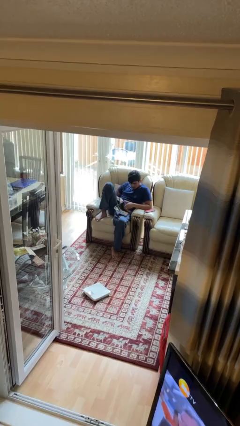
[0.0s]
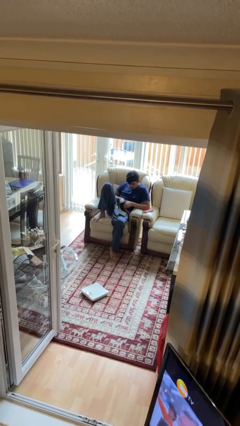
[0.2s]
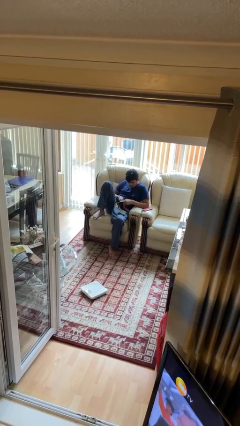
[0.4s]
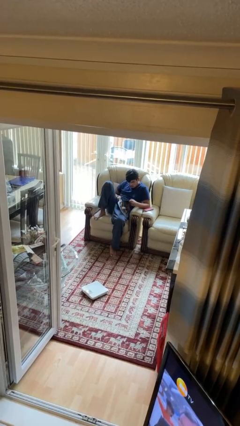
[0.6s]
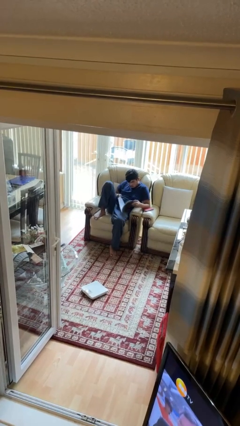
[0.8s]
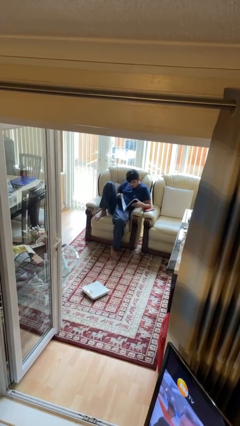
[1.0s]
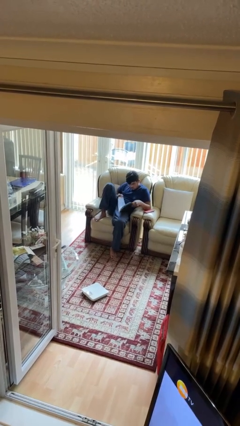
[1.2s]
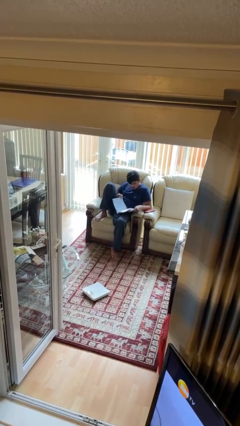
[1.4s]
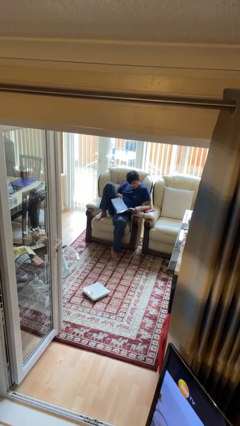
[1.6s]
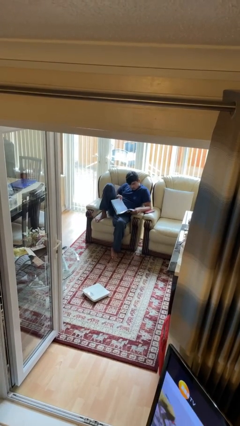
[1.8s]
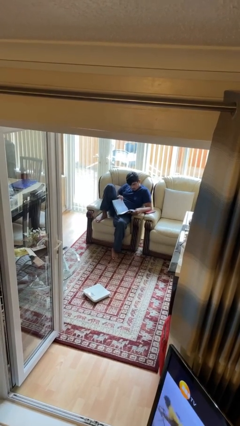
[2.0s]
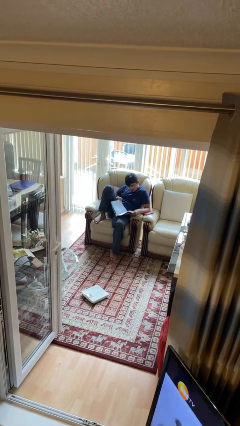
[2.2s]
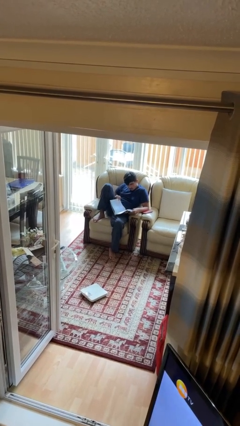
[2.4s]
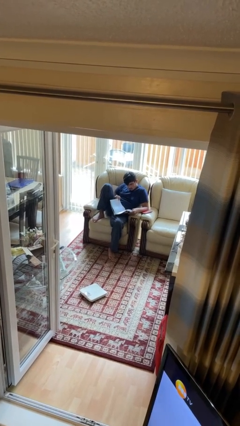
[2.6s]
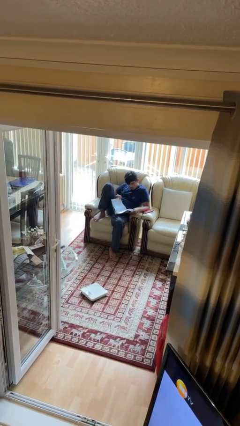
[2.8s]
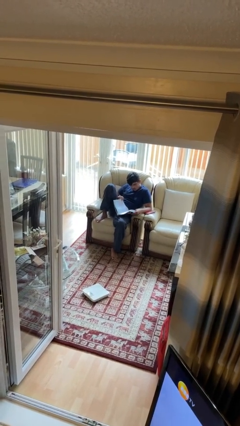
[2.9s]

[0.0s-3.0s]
person reads magazine

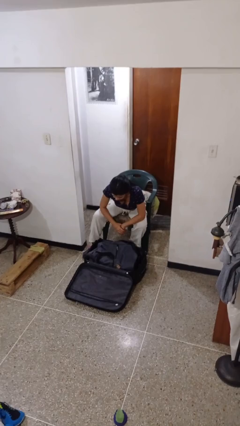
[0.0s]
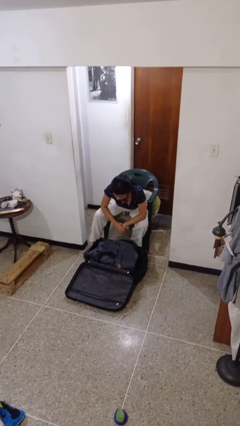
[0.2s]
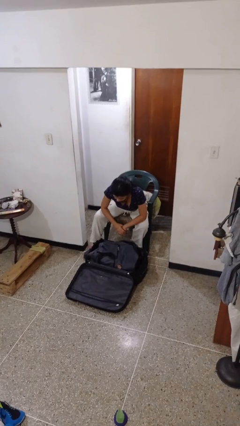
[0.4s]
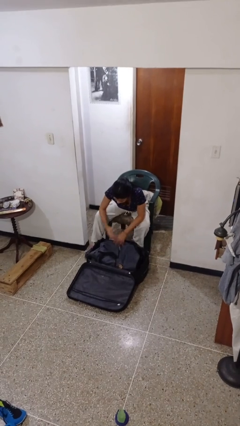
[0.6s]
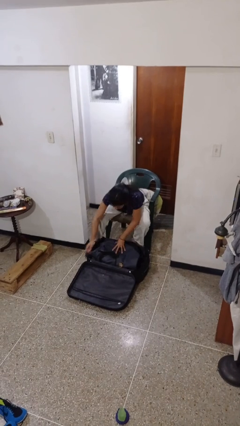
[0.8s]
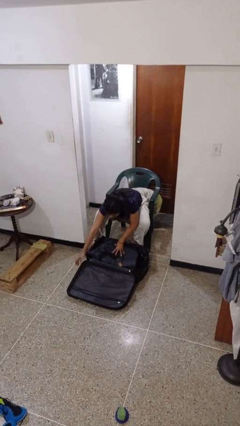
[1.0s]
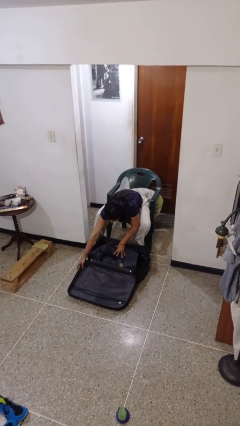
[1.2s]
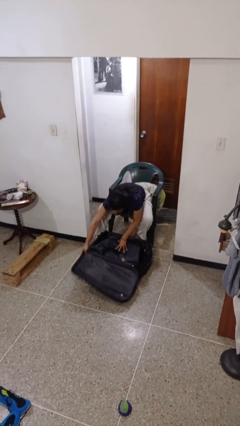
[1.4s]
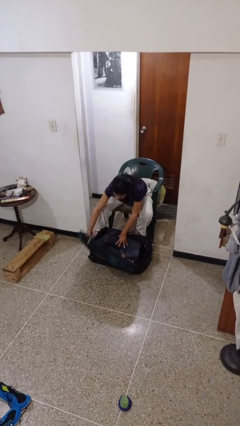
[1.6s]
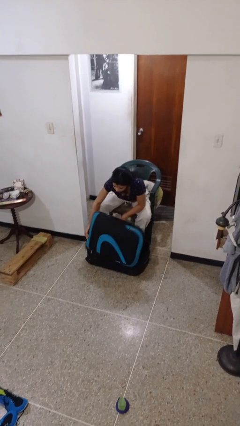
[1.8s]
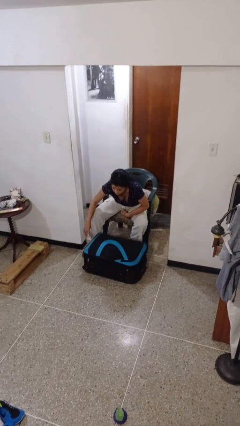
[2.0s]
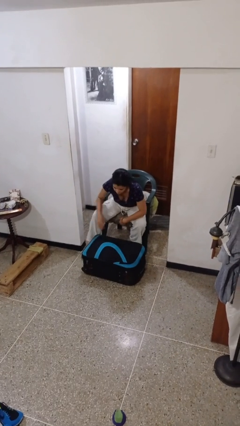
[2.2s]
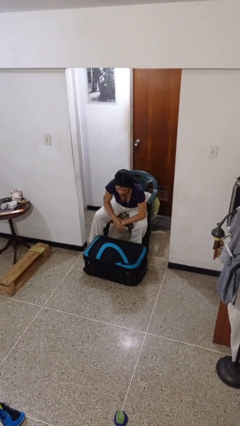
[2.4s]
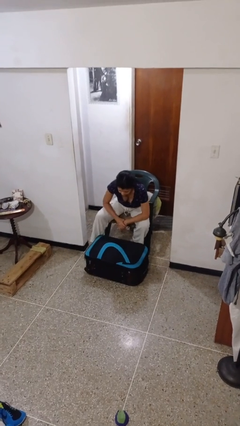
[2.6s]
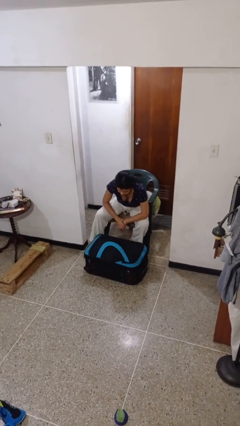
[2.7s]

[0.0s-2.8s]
person closes suitcase

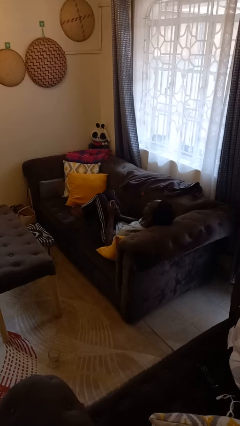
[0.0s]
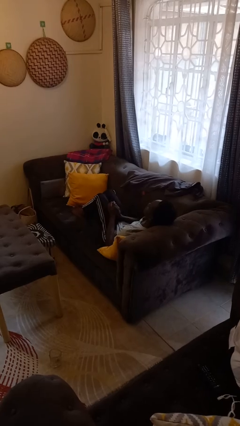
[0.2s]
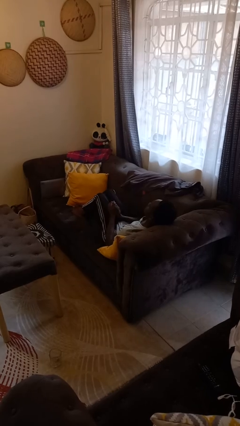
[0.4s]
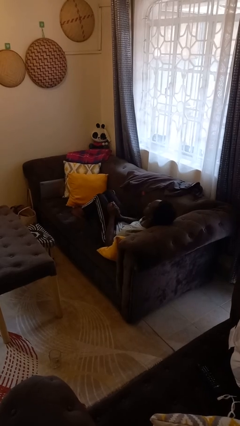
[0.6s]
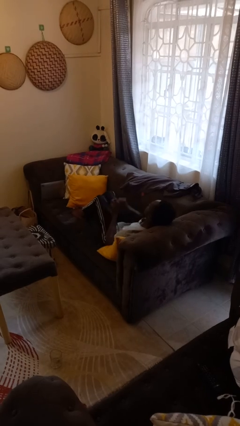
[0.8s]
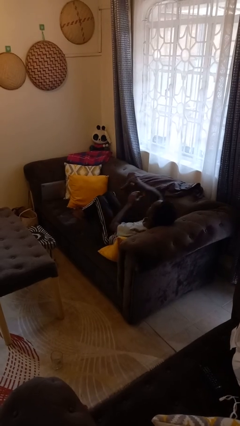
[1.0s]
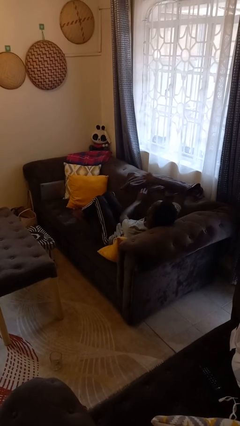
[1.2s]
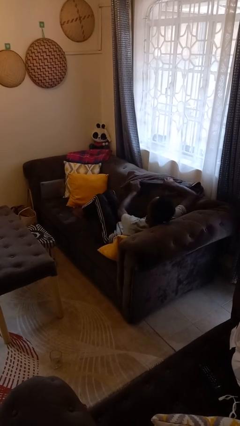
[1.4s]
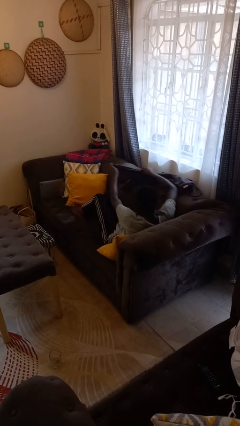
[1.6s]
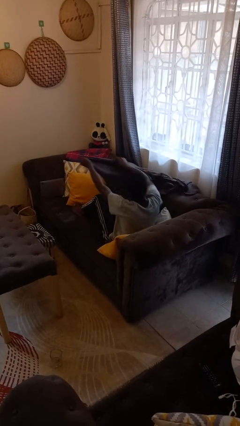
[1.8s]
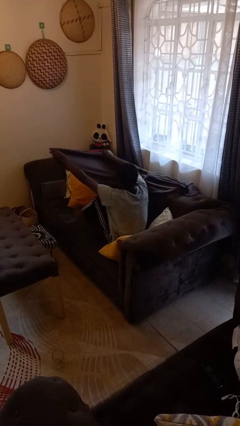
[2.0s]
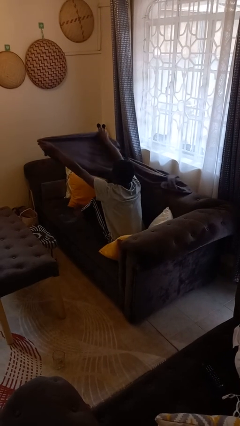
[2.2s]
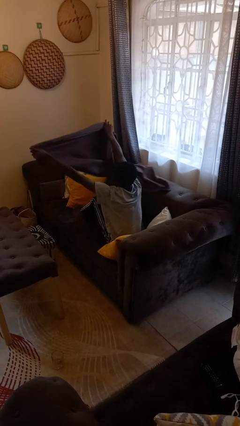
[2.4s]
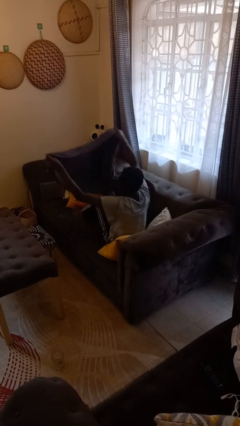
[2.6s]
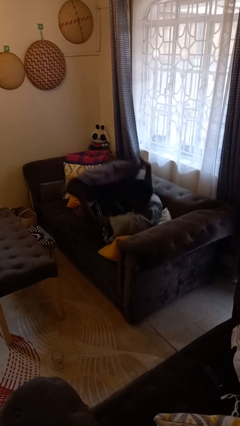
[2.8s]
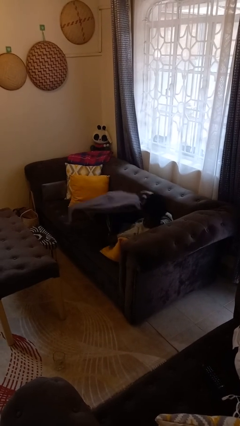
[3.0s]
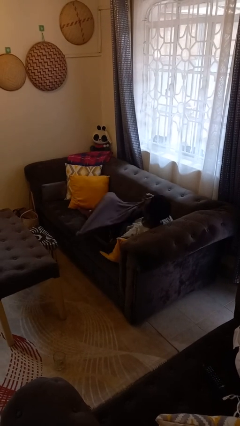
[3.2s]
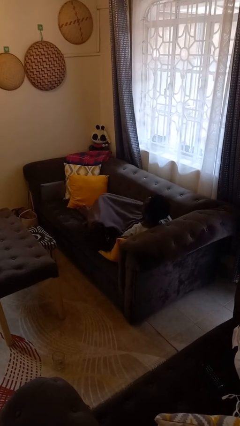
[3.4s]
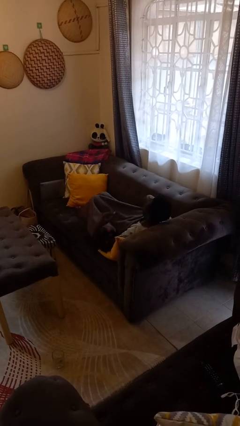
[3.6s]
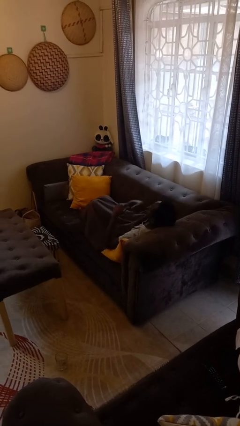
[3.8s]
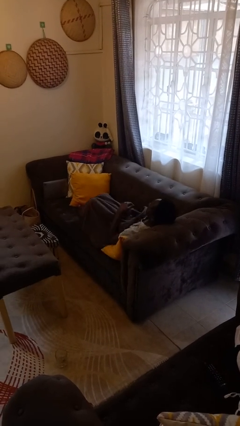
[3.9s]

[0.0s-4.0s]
person covers with blanket

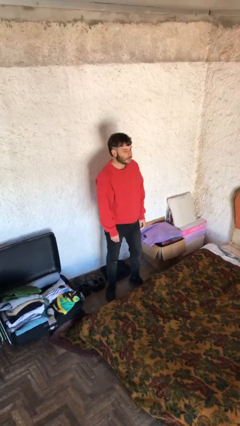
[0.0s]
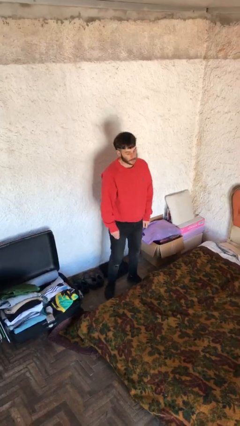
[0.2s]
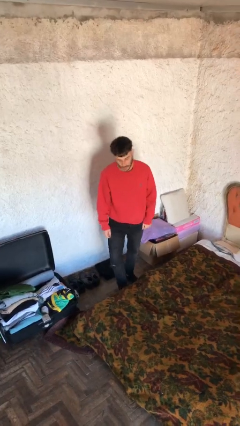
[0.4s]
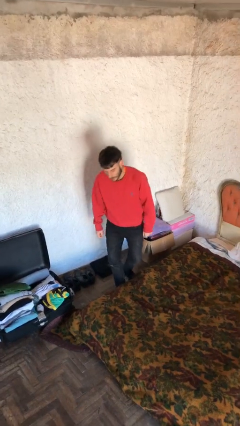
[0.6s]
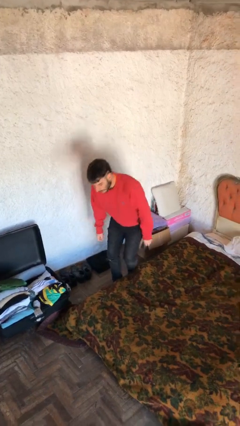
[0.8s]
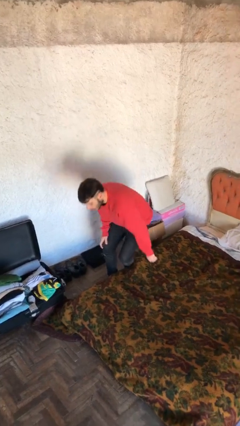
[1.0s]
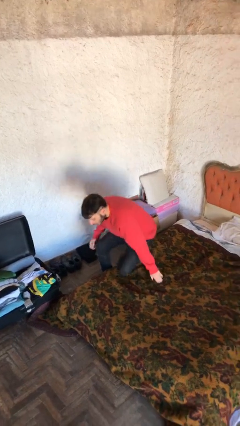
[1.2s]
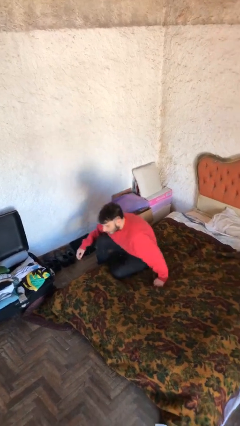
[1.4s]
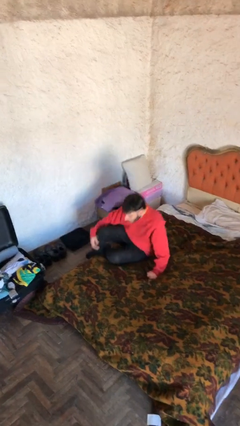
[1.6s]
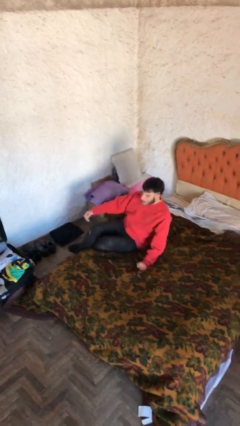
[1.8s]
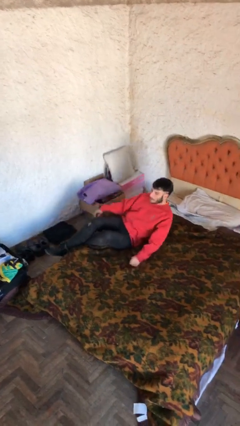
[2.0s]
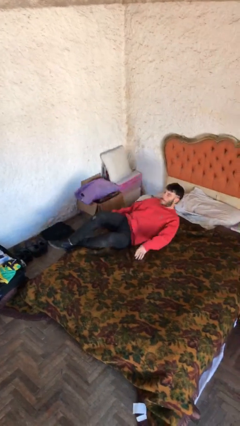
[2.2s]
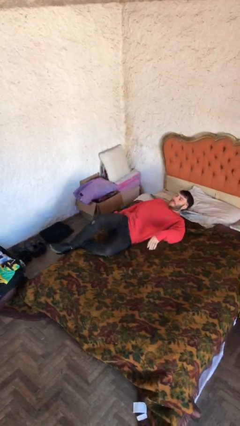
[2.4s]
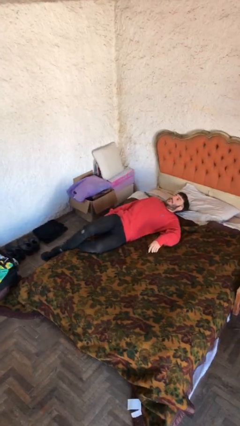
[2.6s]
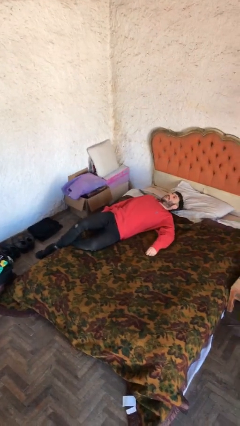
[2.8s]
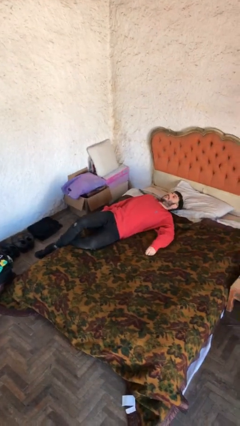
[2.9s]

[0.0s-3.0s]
person lies down on bed

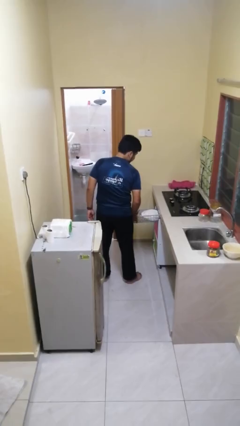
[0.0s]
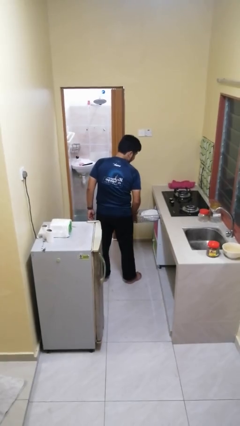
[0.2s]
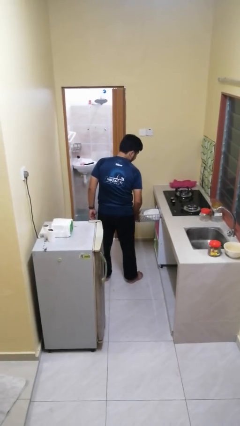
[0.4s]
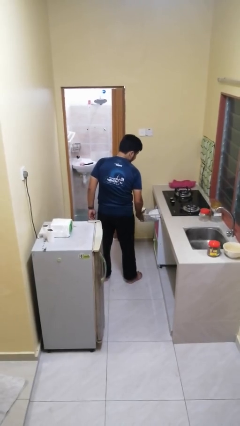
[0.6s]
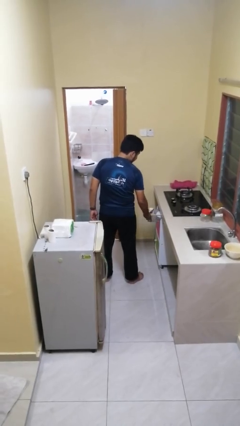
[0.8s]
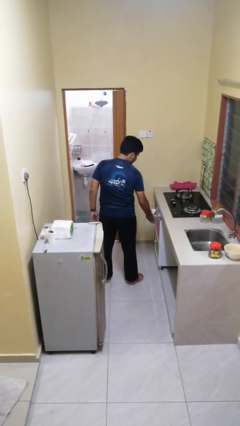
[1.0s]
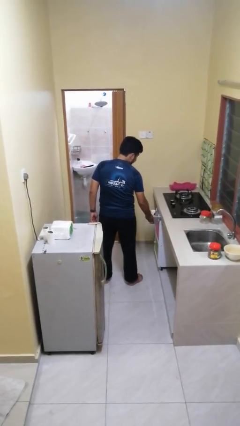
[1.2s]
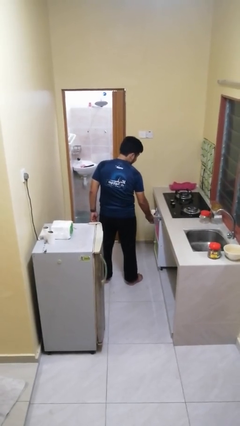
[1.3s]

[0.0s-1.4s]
person closes kitchen drawer

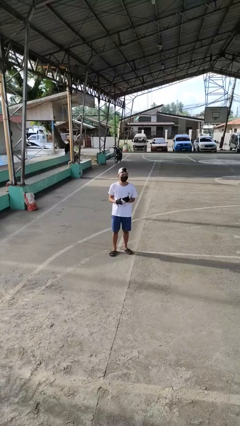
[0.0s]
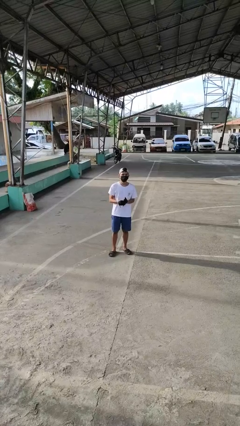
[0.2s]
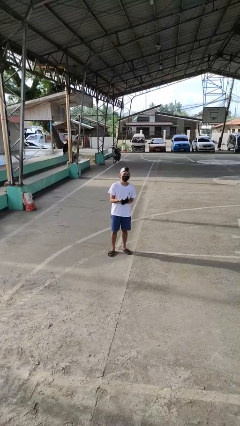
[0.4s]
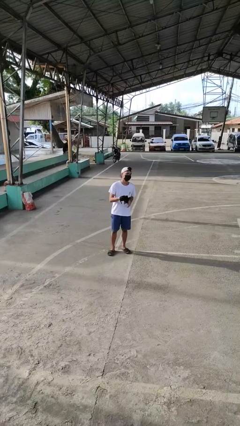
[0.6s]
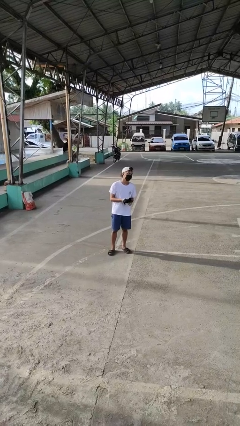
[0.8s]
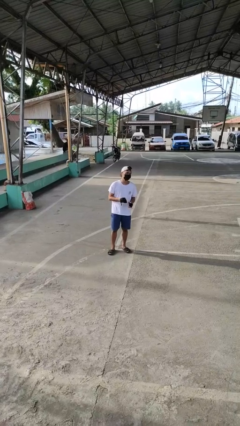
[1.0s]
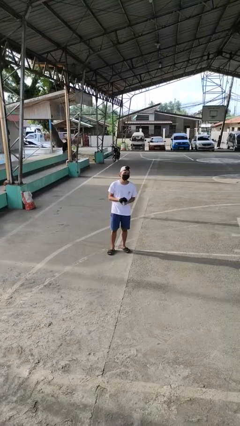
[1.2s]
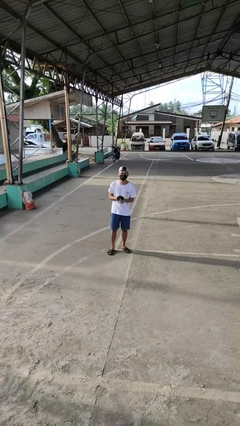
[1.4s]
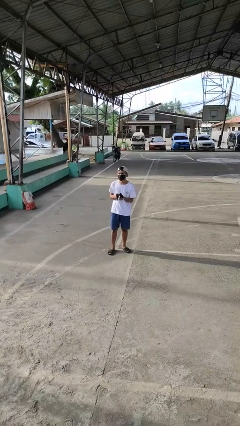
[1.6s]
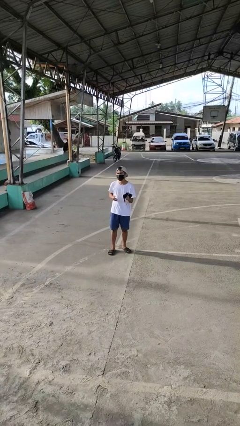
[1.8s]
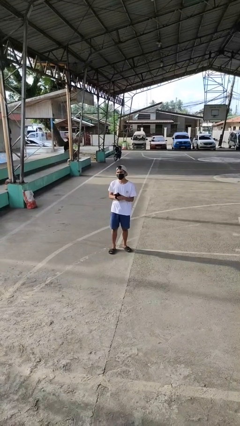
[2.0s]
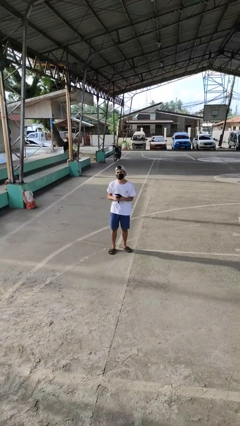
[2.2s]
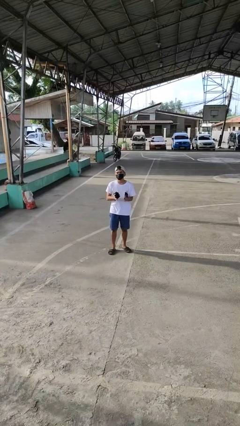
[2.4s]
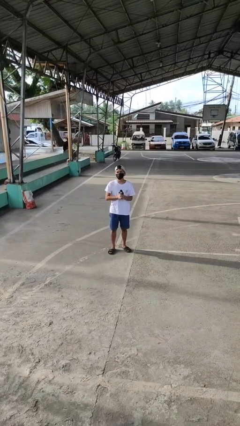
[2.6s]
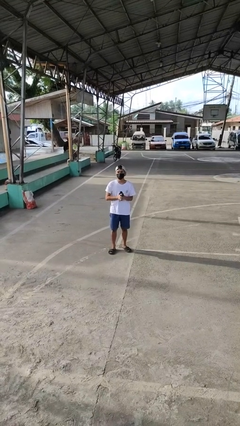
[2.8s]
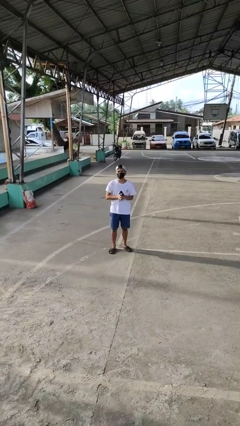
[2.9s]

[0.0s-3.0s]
person takes off gloves
